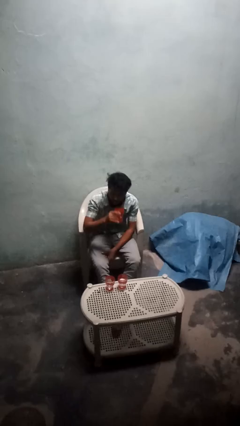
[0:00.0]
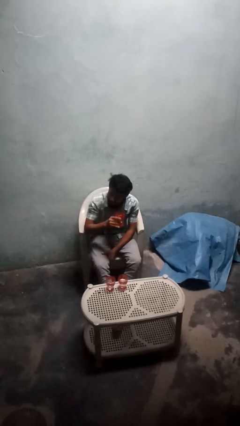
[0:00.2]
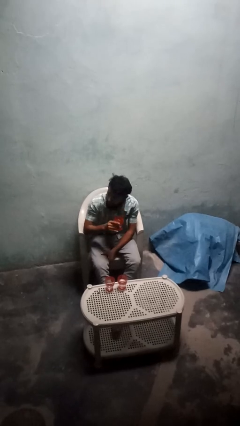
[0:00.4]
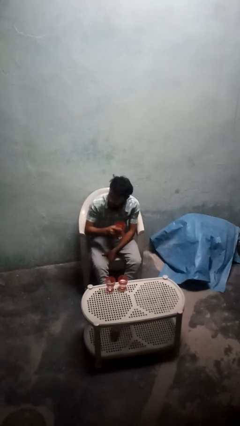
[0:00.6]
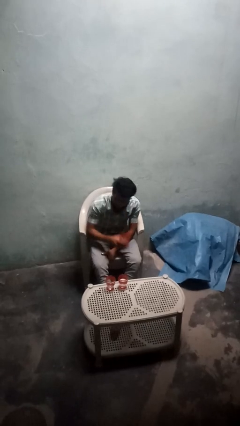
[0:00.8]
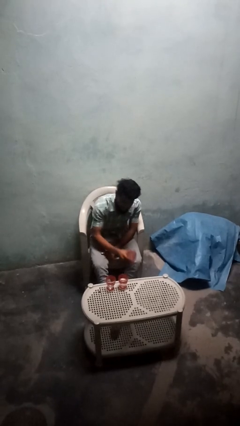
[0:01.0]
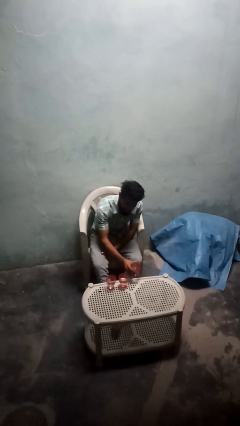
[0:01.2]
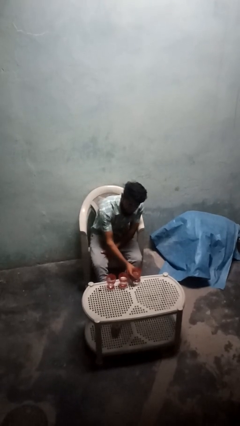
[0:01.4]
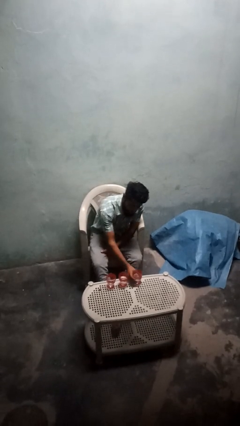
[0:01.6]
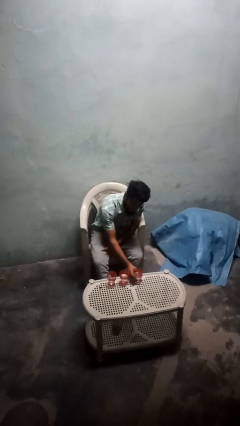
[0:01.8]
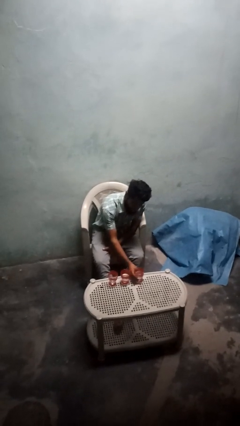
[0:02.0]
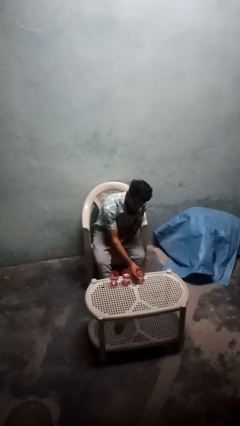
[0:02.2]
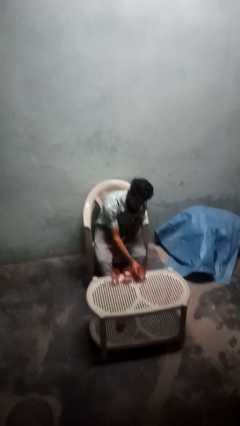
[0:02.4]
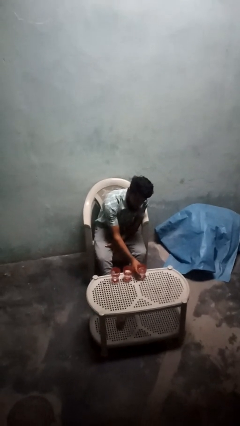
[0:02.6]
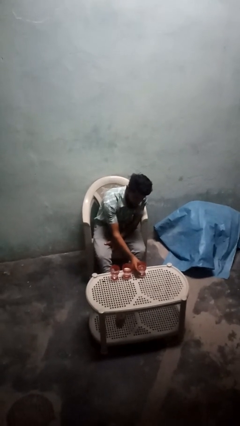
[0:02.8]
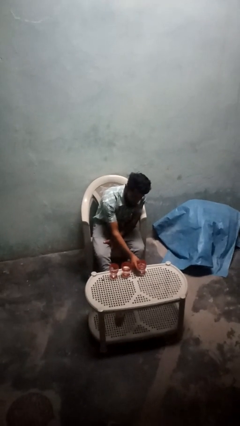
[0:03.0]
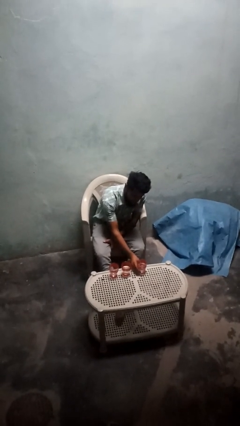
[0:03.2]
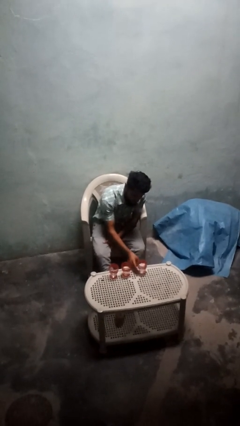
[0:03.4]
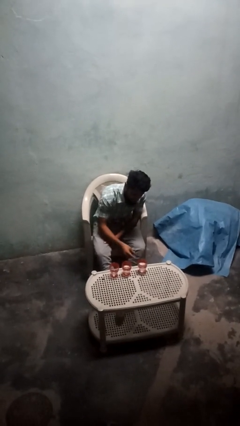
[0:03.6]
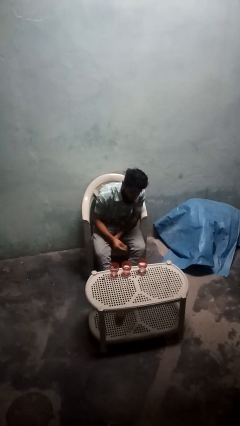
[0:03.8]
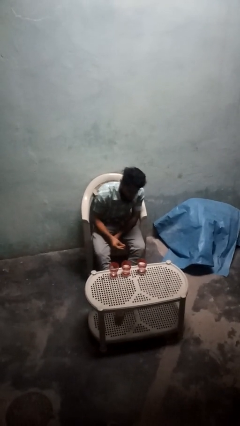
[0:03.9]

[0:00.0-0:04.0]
person puts down object on table

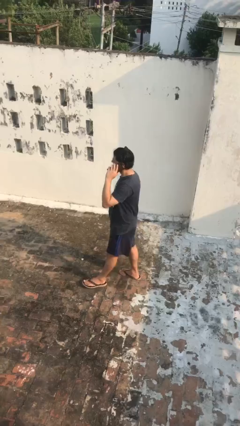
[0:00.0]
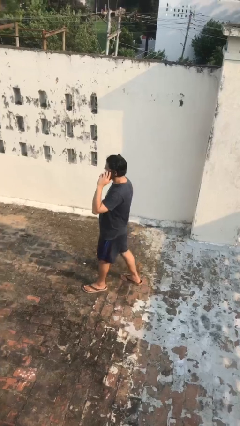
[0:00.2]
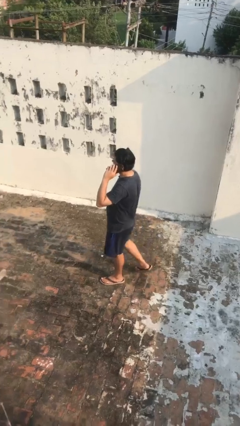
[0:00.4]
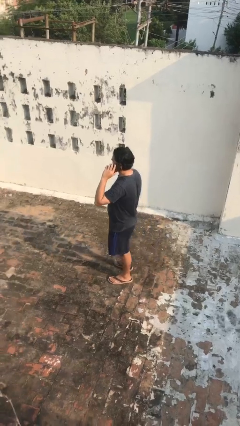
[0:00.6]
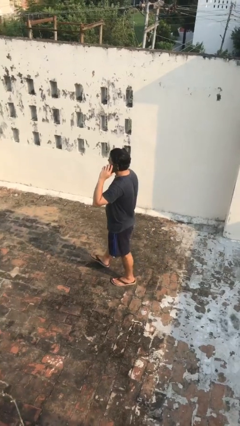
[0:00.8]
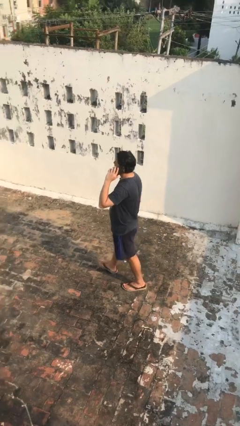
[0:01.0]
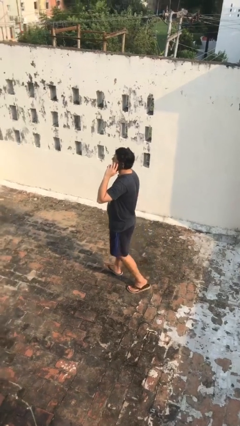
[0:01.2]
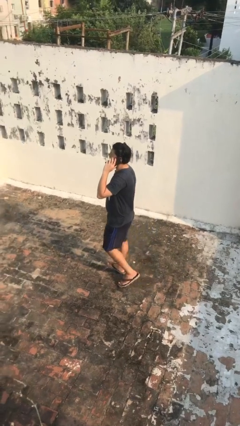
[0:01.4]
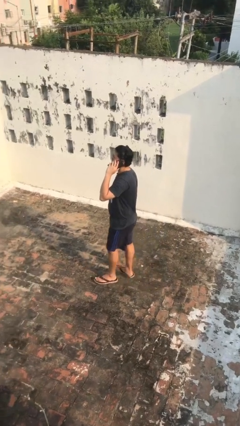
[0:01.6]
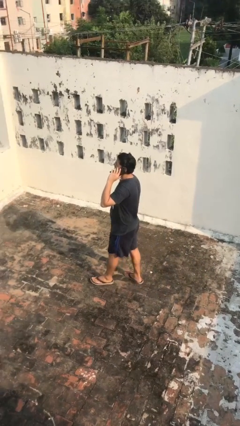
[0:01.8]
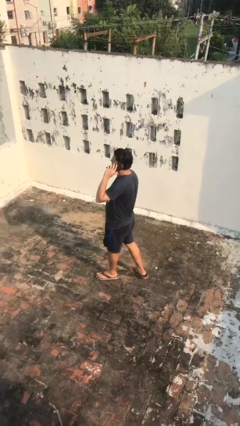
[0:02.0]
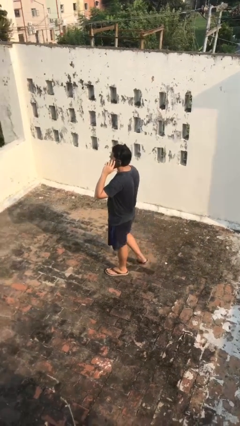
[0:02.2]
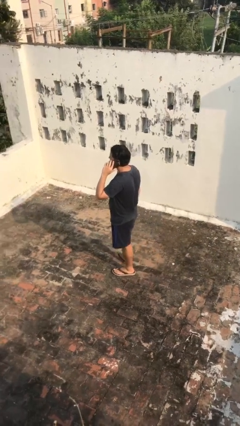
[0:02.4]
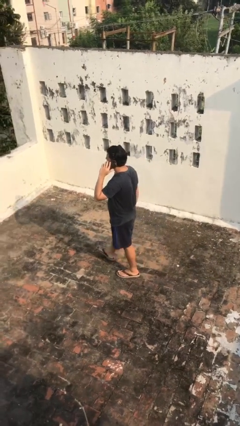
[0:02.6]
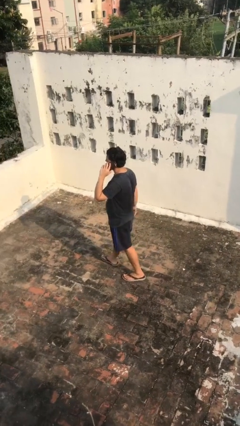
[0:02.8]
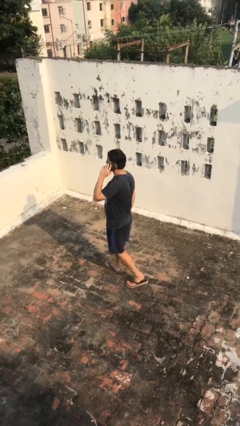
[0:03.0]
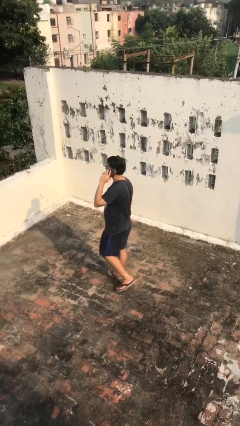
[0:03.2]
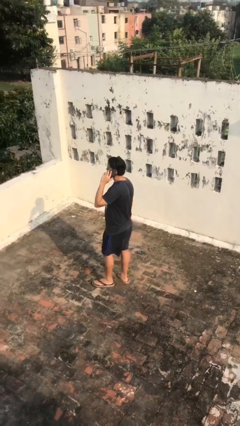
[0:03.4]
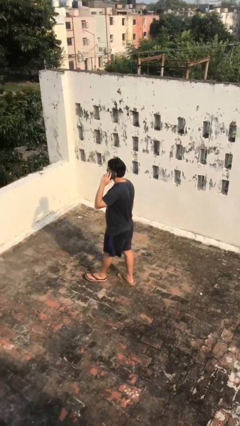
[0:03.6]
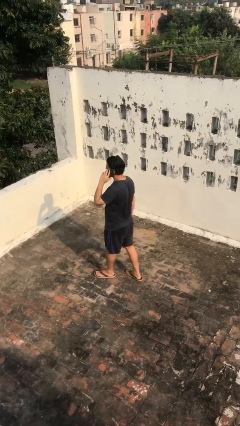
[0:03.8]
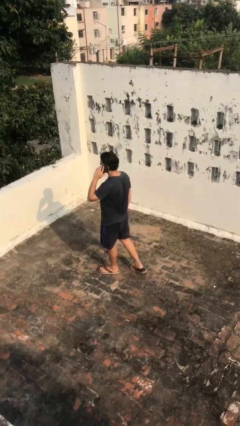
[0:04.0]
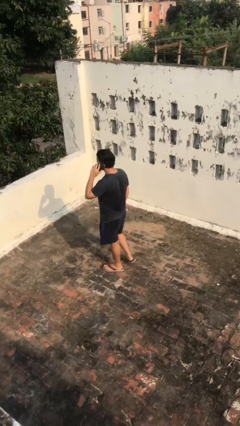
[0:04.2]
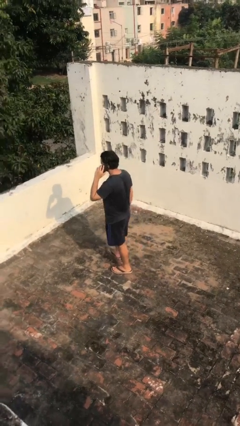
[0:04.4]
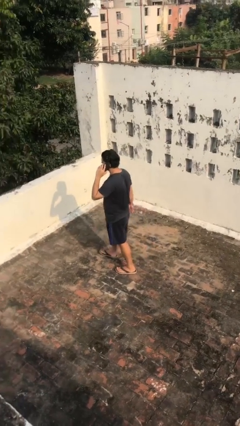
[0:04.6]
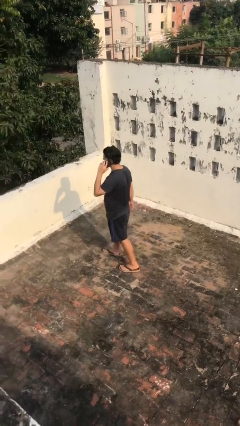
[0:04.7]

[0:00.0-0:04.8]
person talks on phone

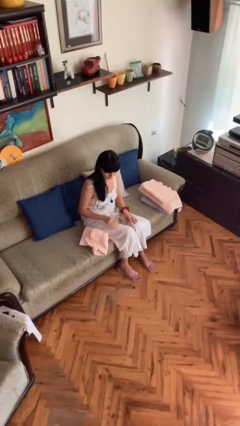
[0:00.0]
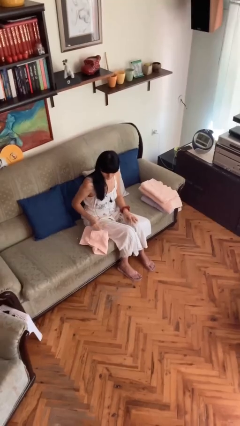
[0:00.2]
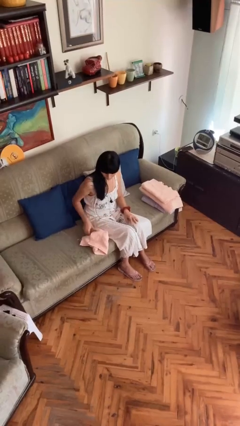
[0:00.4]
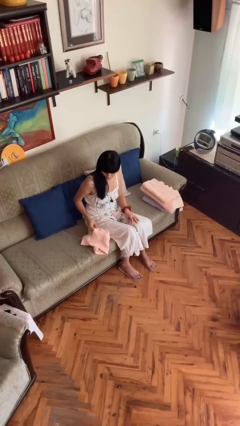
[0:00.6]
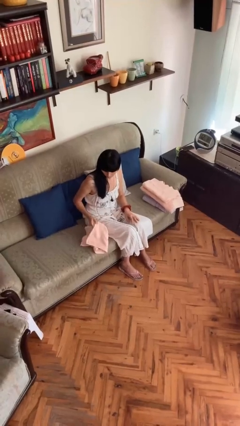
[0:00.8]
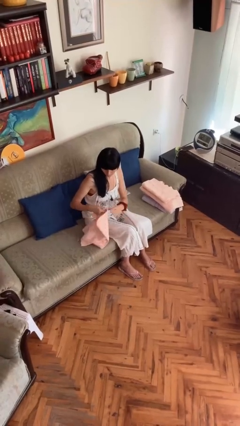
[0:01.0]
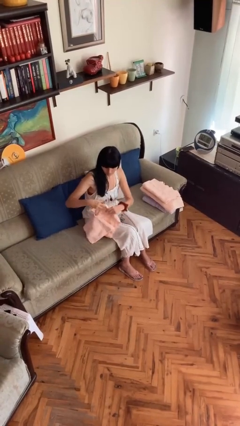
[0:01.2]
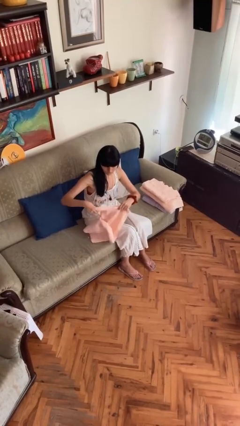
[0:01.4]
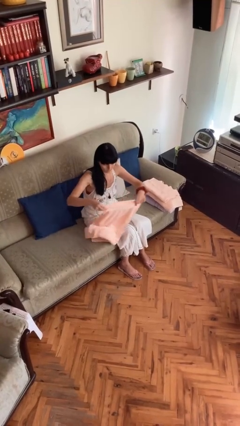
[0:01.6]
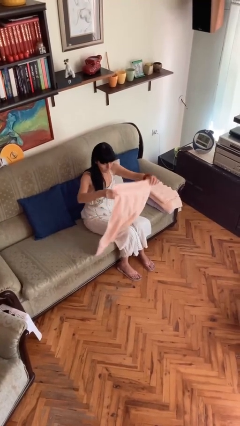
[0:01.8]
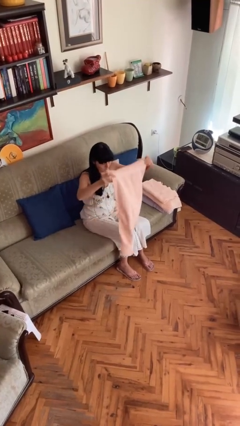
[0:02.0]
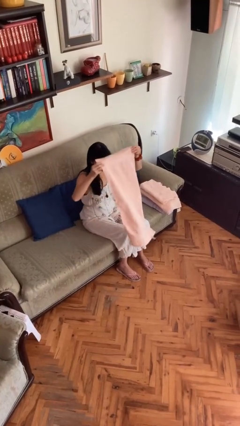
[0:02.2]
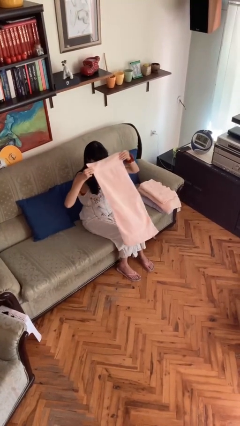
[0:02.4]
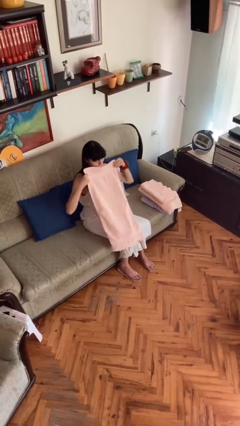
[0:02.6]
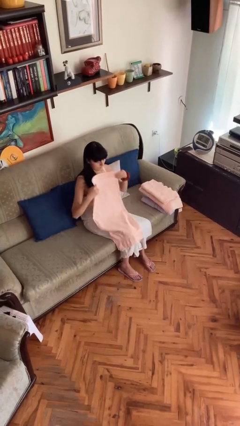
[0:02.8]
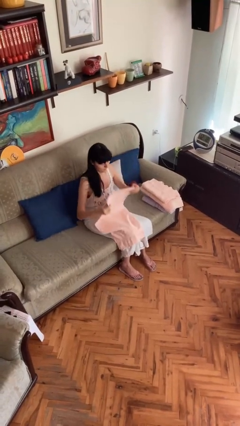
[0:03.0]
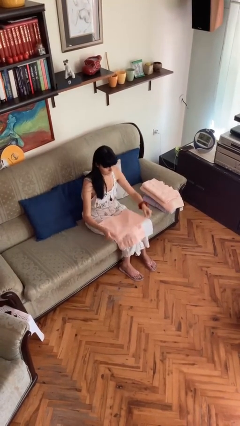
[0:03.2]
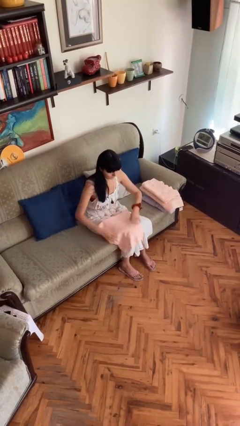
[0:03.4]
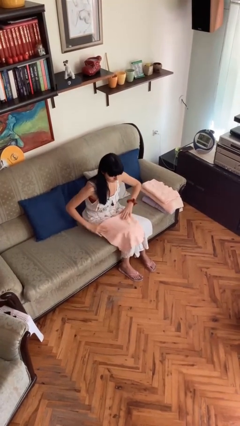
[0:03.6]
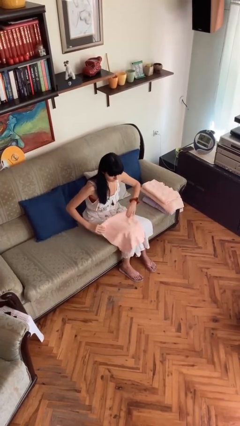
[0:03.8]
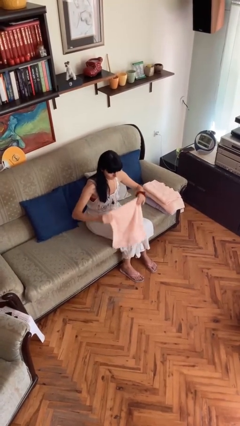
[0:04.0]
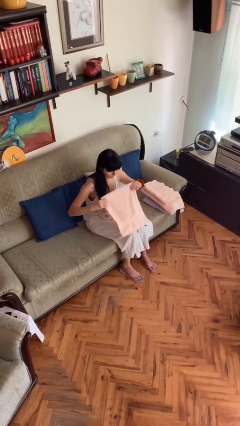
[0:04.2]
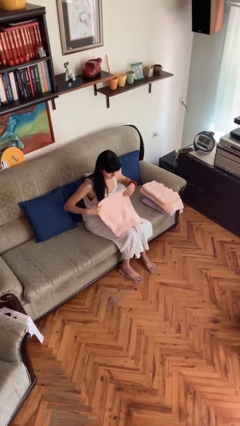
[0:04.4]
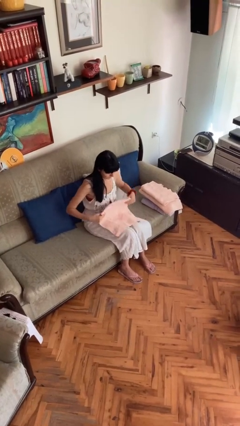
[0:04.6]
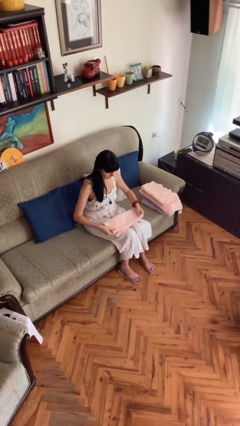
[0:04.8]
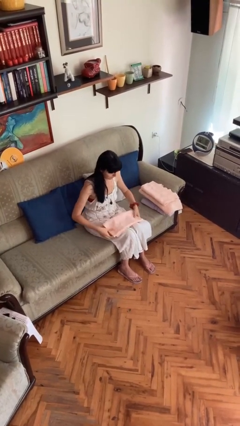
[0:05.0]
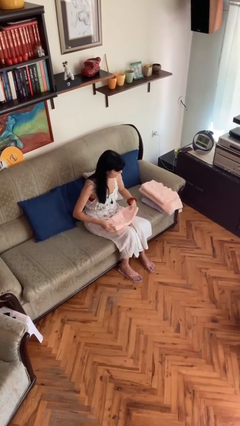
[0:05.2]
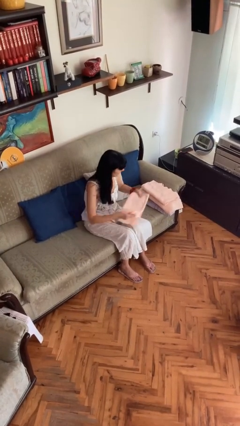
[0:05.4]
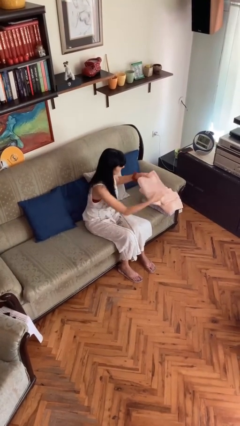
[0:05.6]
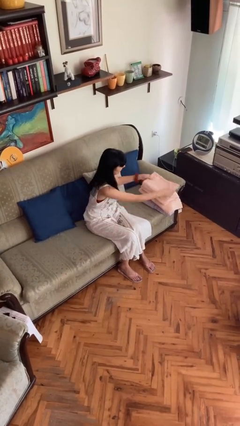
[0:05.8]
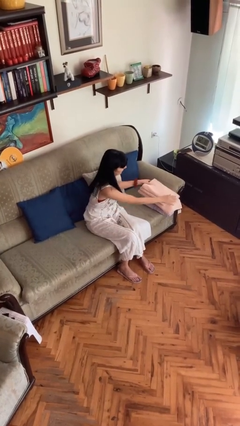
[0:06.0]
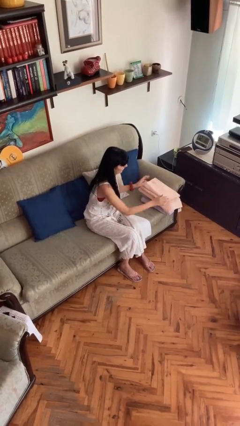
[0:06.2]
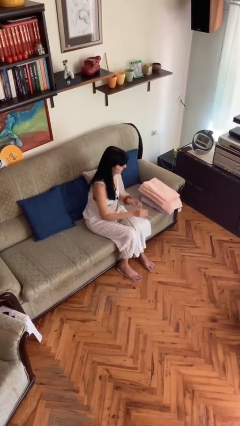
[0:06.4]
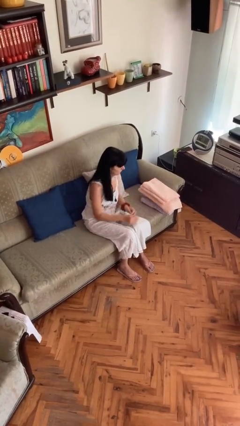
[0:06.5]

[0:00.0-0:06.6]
person folds towel

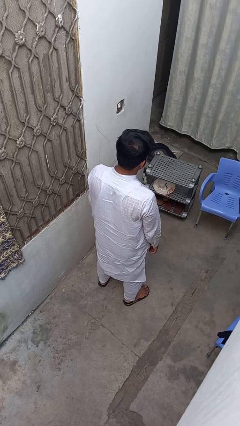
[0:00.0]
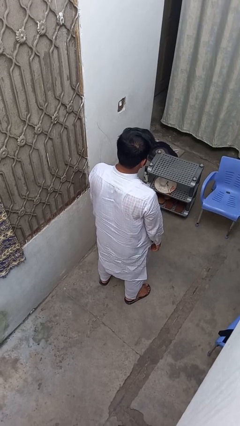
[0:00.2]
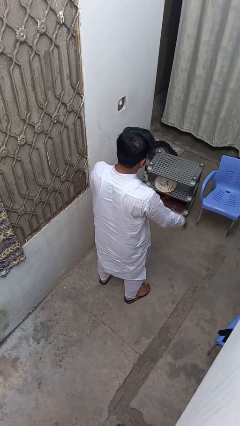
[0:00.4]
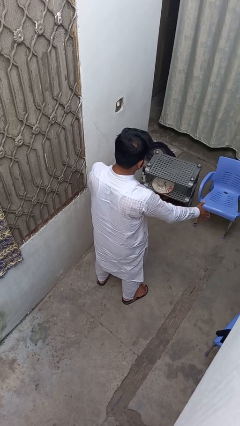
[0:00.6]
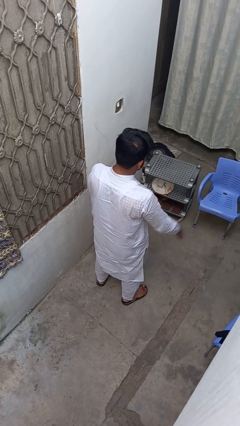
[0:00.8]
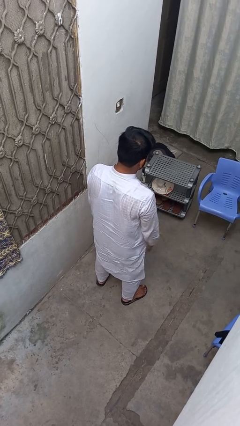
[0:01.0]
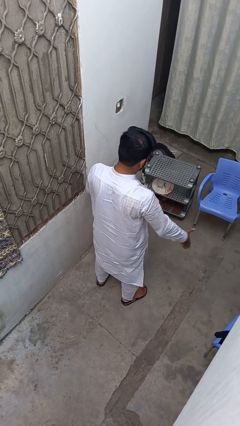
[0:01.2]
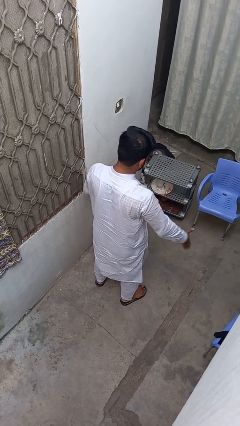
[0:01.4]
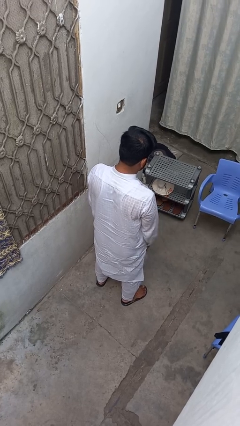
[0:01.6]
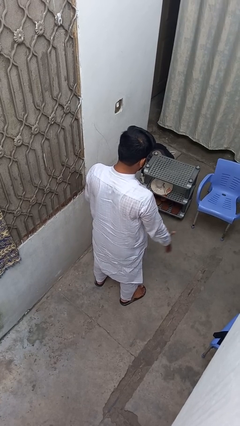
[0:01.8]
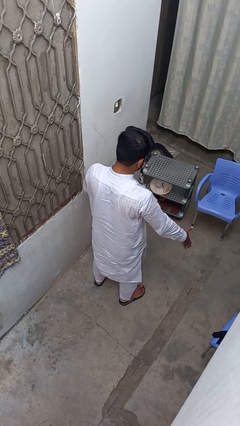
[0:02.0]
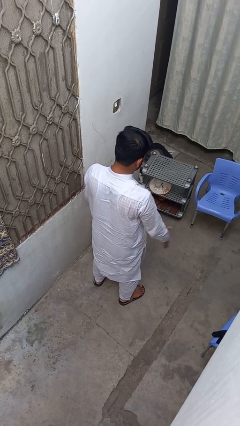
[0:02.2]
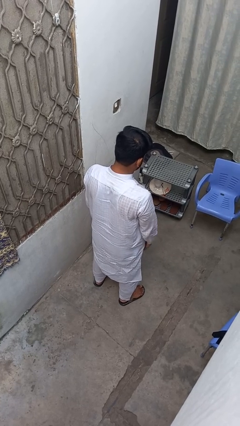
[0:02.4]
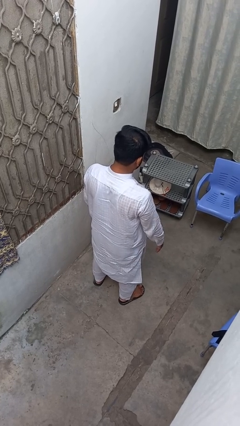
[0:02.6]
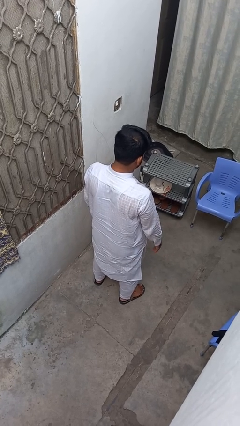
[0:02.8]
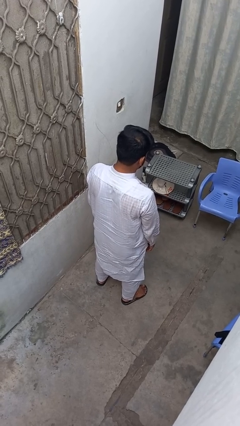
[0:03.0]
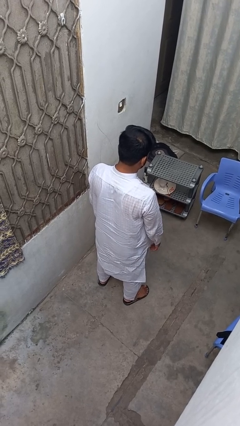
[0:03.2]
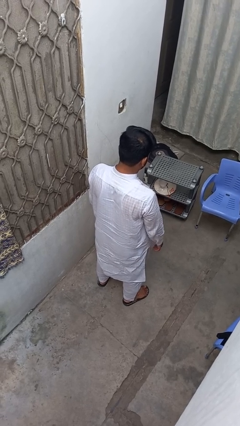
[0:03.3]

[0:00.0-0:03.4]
person slaps hands on thighs
